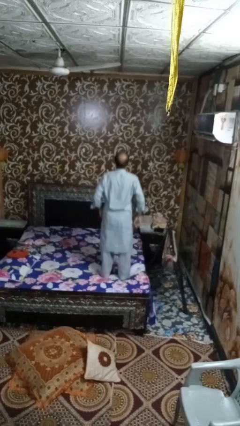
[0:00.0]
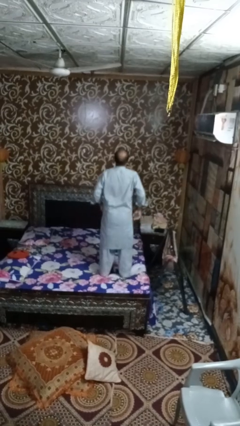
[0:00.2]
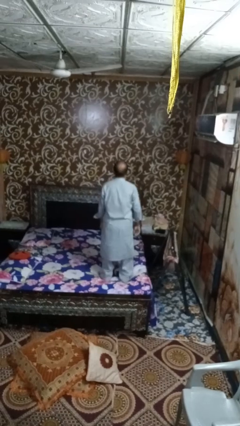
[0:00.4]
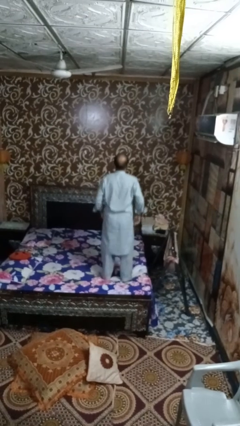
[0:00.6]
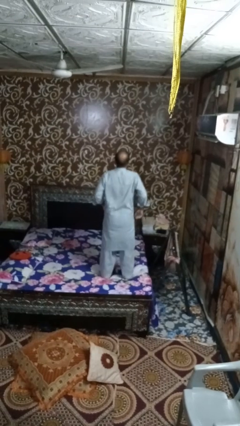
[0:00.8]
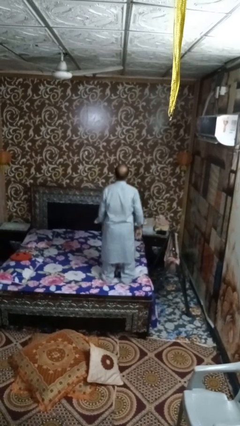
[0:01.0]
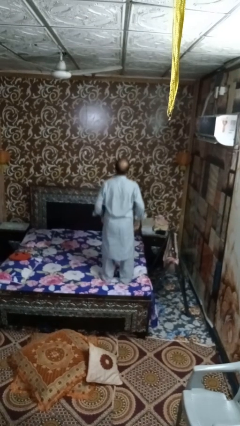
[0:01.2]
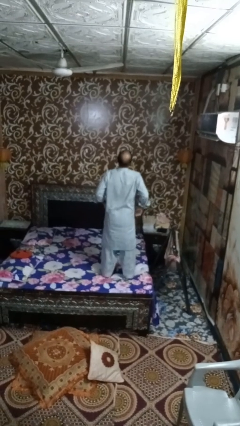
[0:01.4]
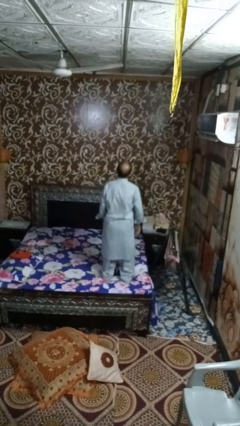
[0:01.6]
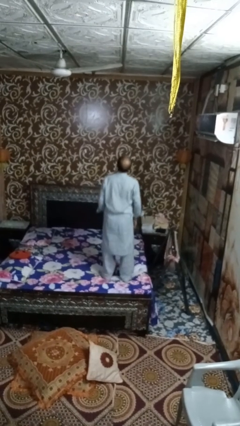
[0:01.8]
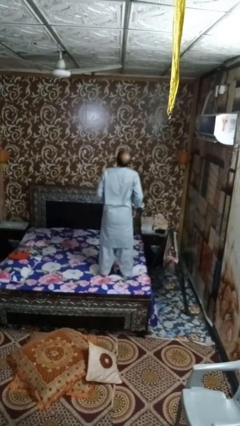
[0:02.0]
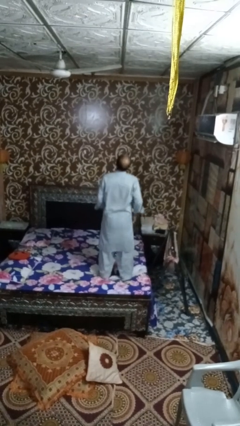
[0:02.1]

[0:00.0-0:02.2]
person jumps on bed

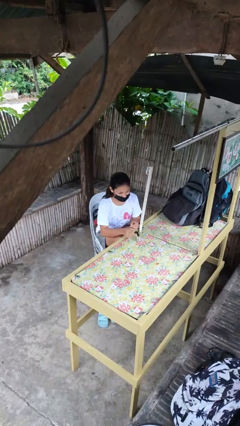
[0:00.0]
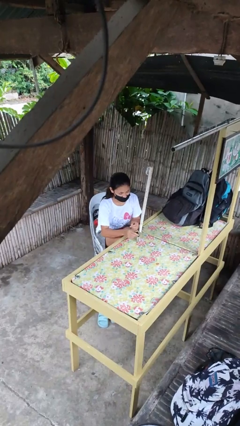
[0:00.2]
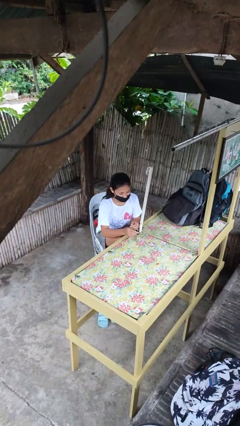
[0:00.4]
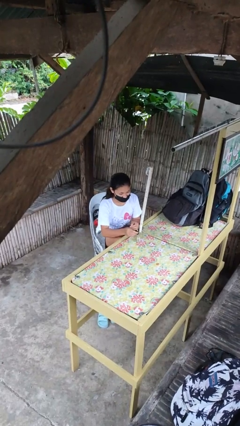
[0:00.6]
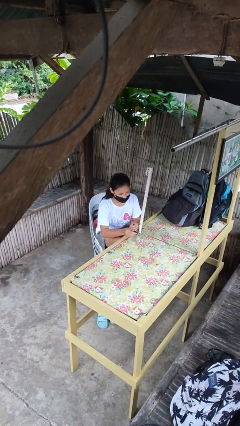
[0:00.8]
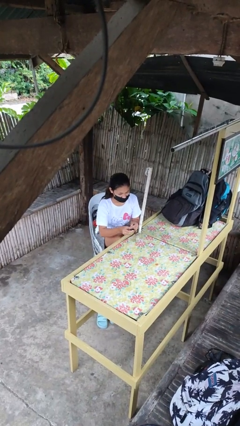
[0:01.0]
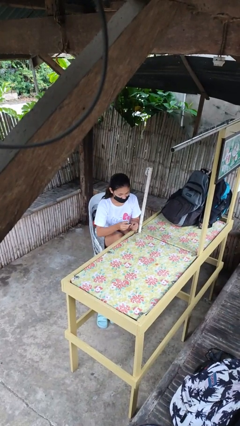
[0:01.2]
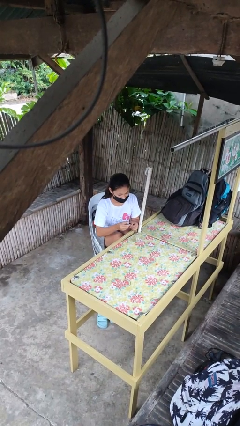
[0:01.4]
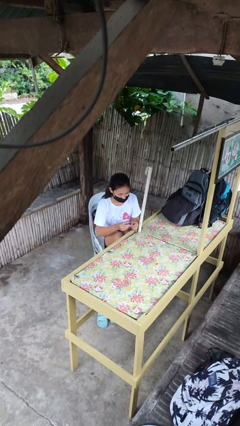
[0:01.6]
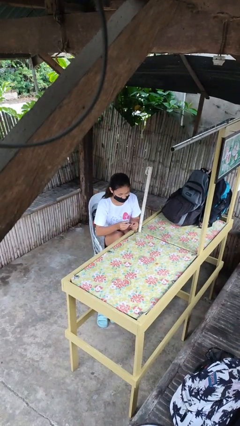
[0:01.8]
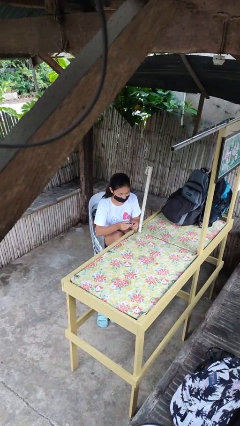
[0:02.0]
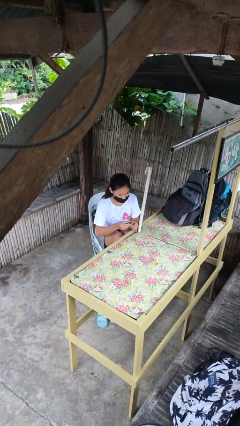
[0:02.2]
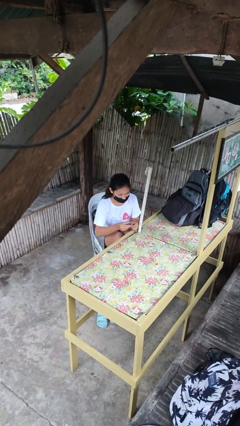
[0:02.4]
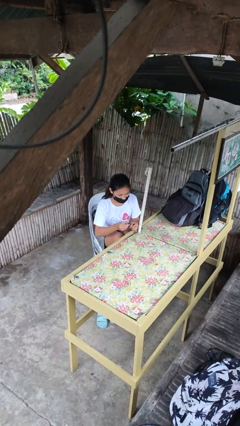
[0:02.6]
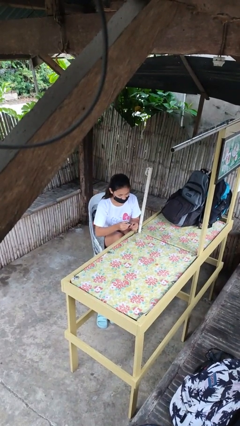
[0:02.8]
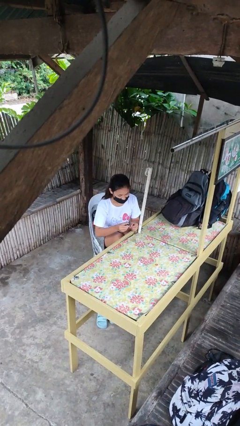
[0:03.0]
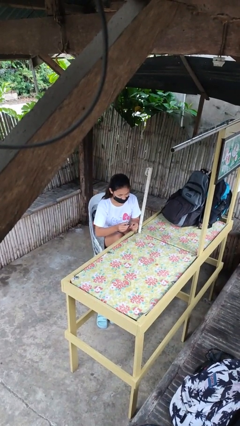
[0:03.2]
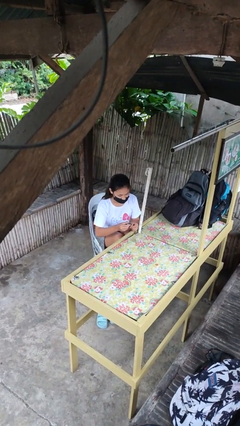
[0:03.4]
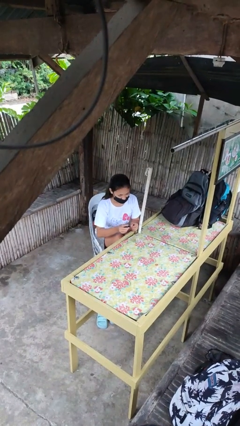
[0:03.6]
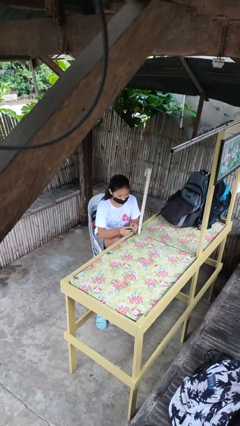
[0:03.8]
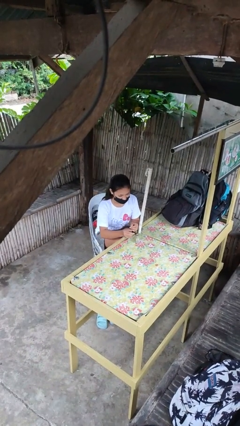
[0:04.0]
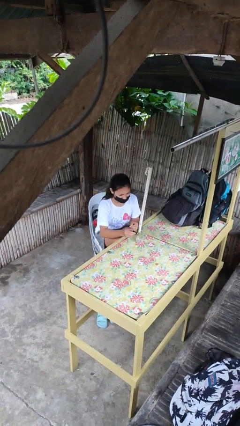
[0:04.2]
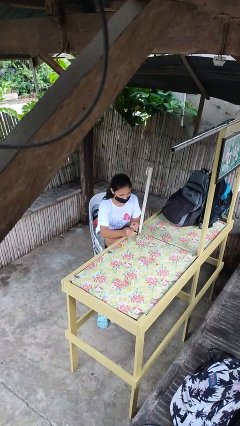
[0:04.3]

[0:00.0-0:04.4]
person paints fingernails

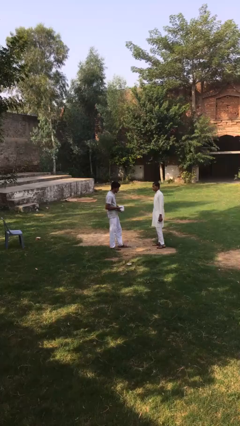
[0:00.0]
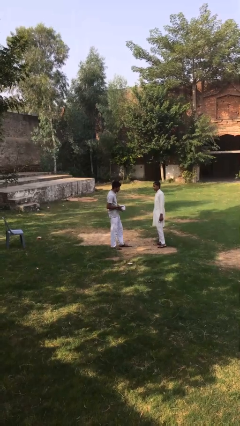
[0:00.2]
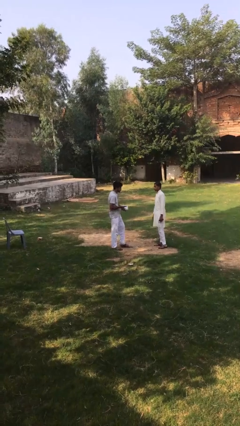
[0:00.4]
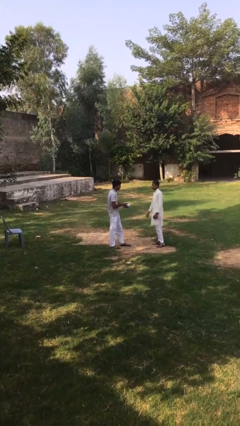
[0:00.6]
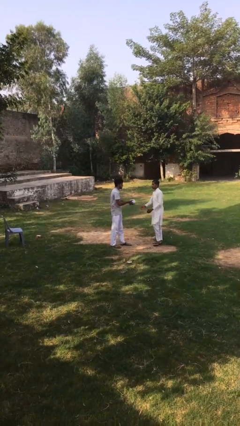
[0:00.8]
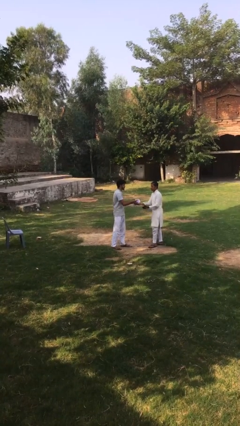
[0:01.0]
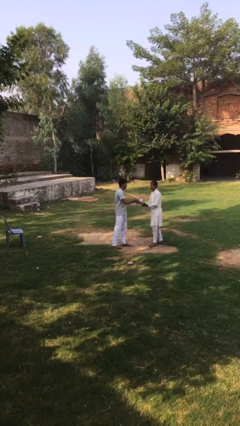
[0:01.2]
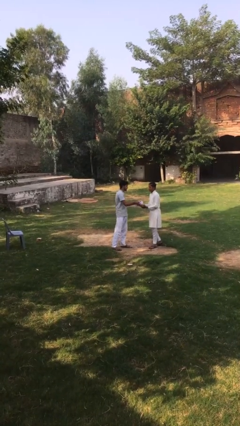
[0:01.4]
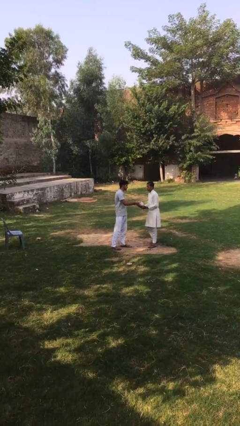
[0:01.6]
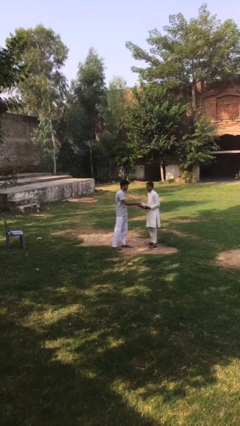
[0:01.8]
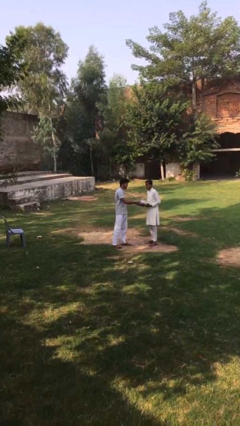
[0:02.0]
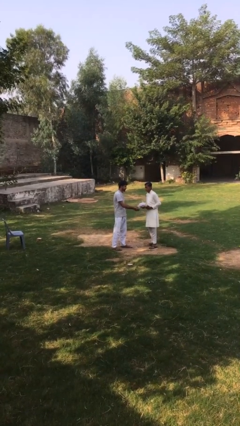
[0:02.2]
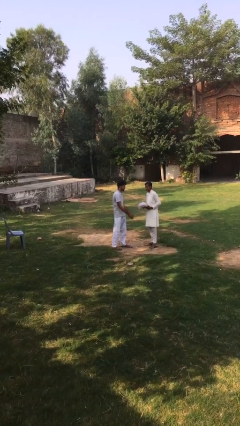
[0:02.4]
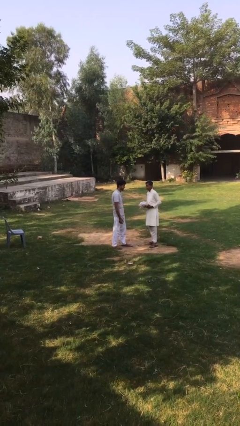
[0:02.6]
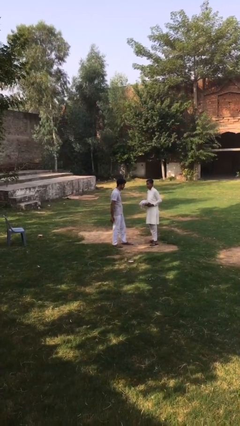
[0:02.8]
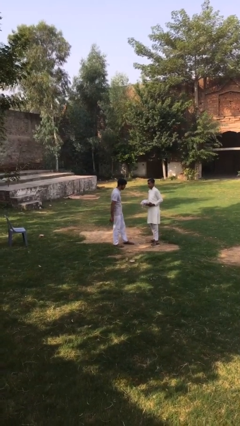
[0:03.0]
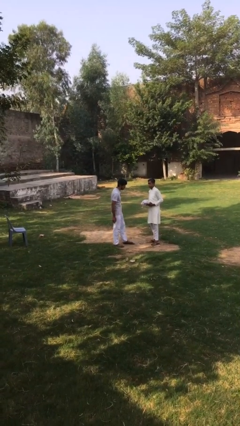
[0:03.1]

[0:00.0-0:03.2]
person transfers object to person

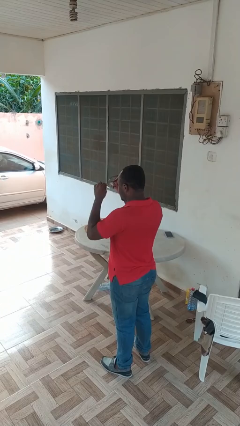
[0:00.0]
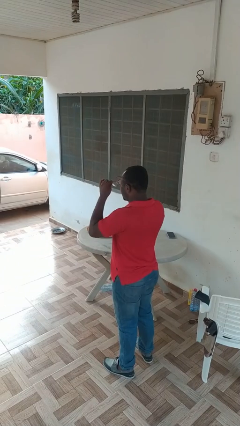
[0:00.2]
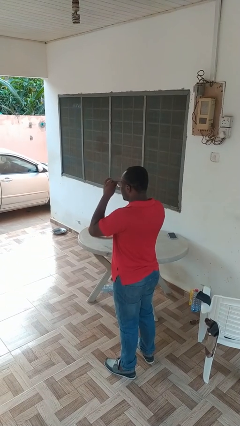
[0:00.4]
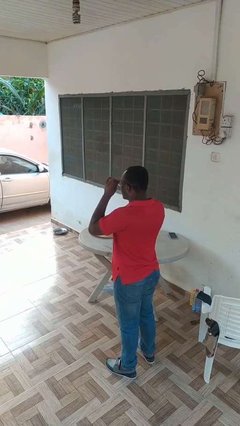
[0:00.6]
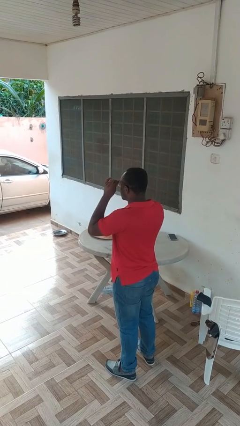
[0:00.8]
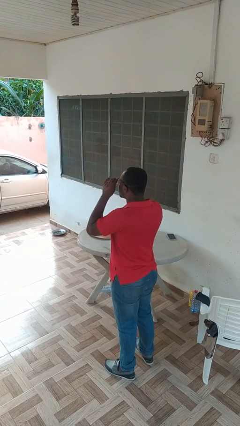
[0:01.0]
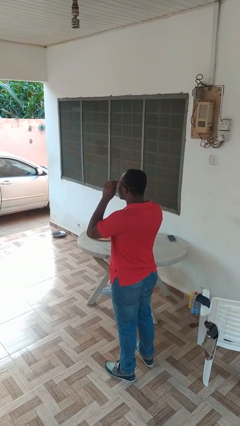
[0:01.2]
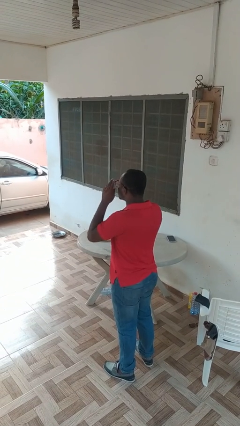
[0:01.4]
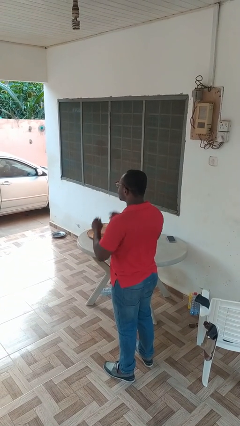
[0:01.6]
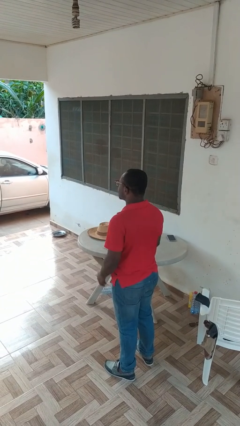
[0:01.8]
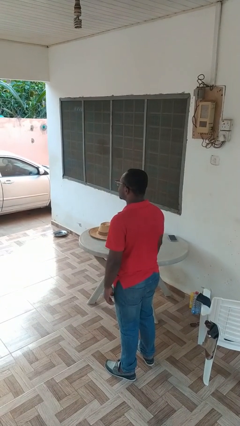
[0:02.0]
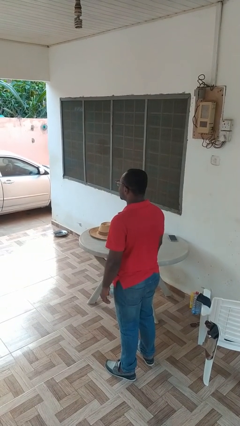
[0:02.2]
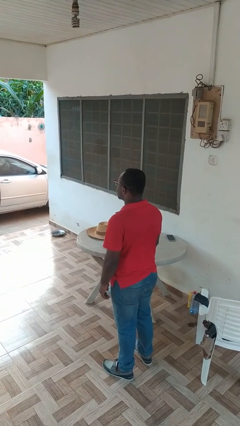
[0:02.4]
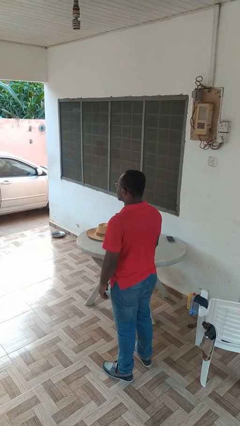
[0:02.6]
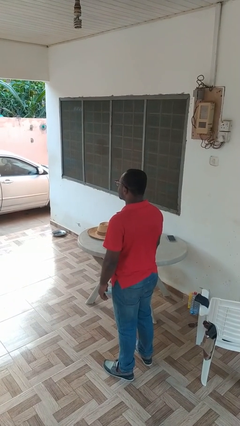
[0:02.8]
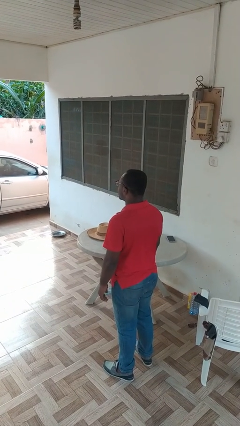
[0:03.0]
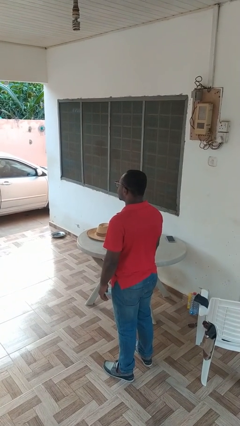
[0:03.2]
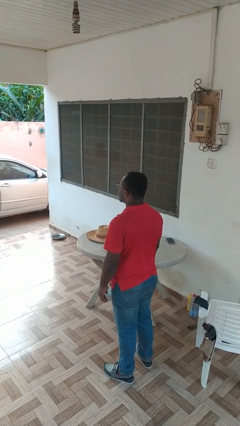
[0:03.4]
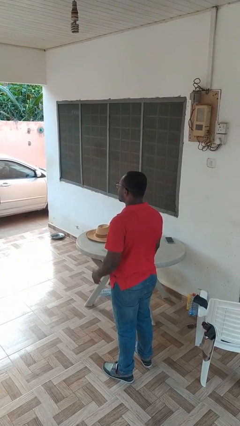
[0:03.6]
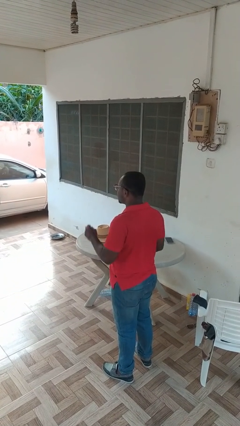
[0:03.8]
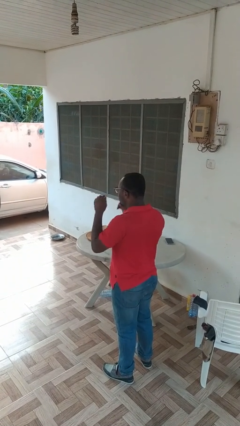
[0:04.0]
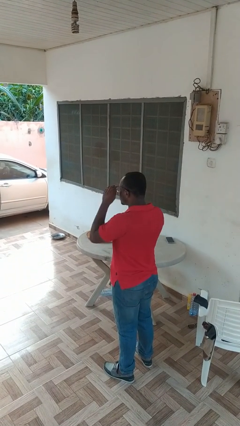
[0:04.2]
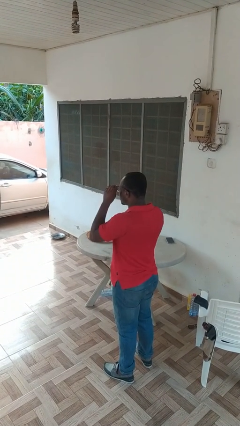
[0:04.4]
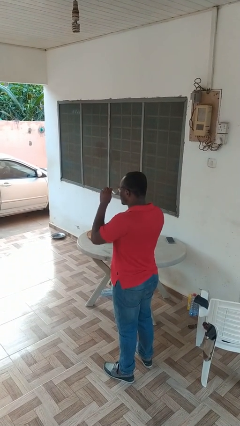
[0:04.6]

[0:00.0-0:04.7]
person puts on glasses

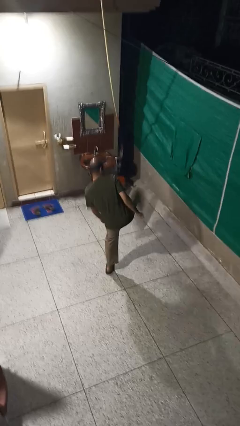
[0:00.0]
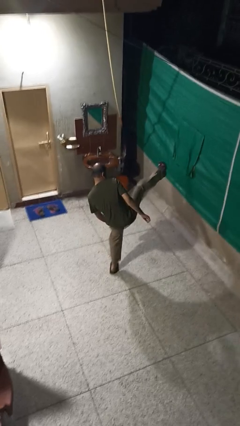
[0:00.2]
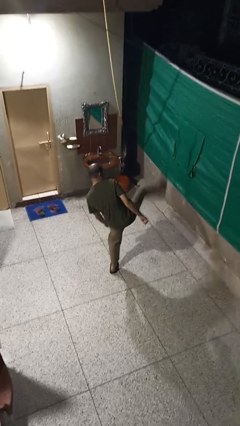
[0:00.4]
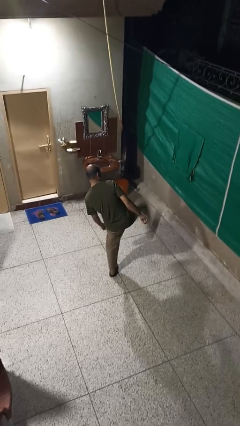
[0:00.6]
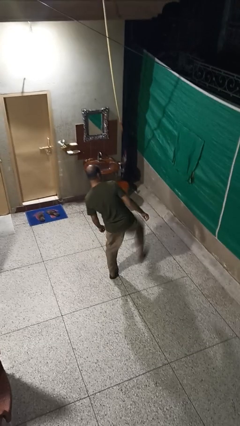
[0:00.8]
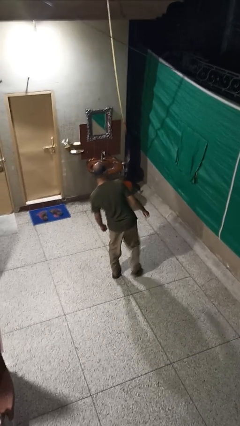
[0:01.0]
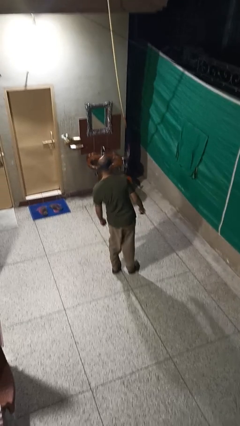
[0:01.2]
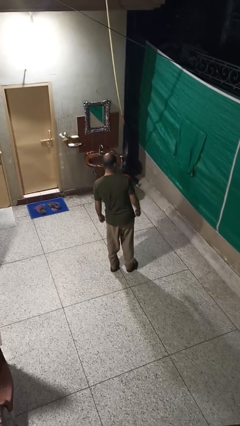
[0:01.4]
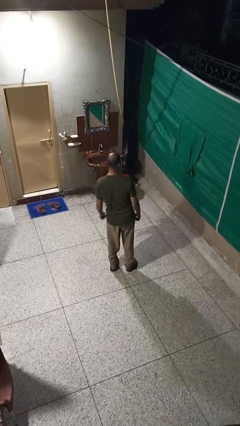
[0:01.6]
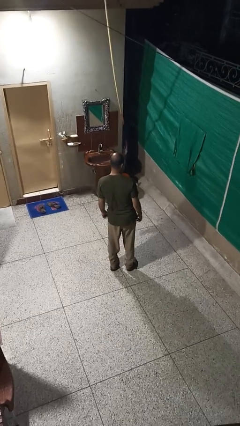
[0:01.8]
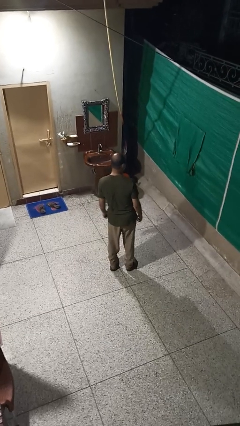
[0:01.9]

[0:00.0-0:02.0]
person karate kicks

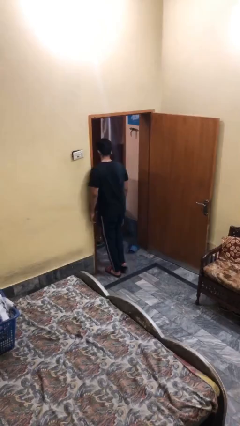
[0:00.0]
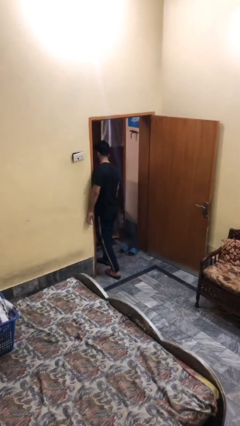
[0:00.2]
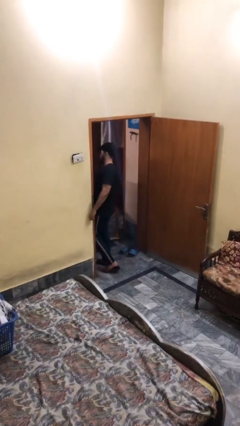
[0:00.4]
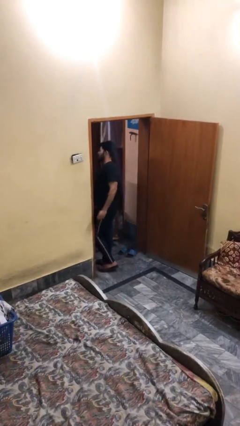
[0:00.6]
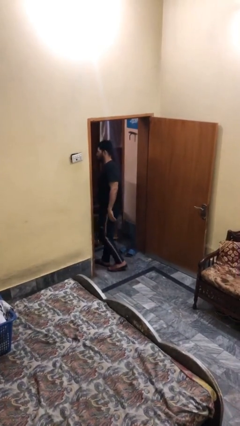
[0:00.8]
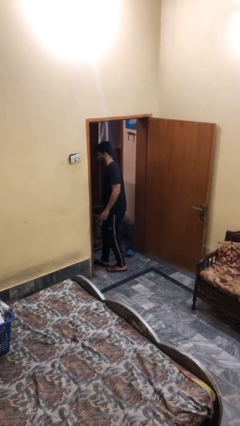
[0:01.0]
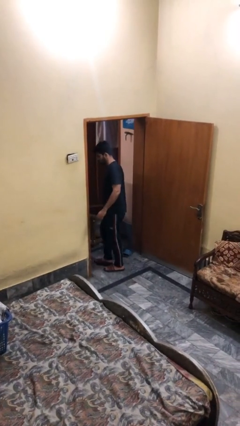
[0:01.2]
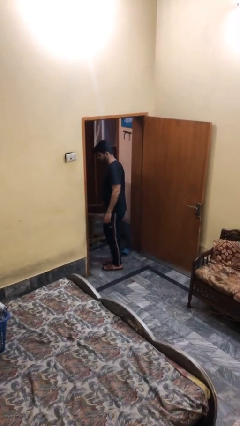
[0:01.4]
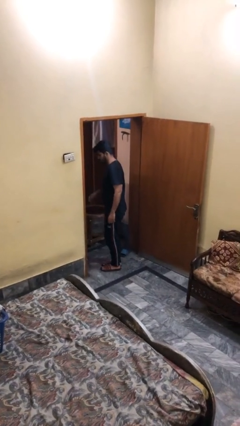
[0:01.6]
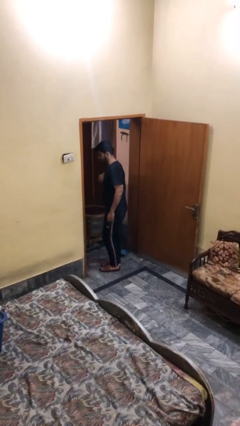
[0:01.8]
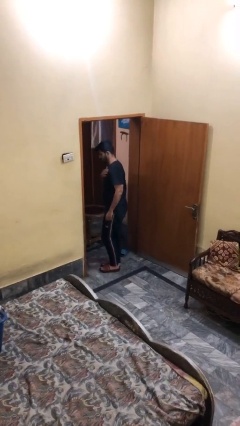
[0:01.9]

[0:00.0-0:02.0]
person bumps into wall
